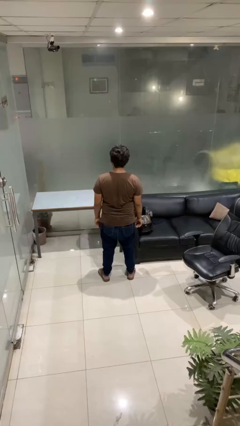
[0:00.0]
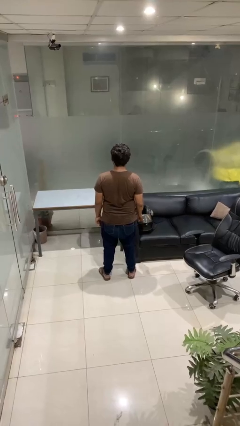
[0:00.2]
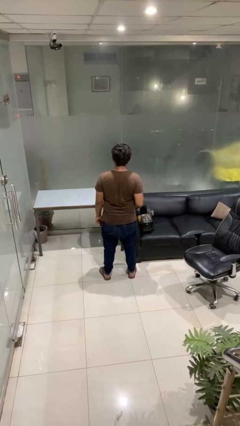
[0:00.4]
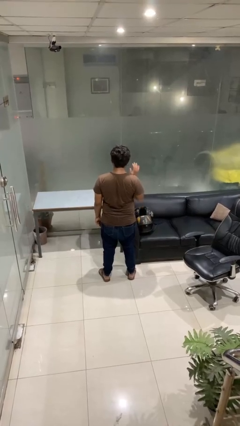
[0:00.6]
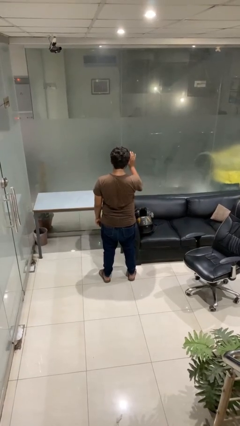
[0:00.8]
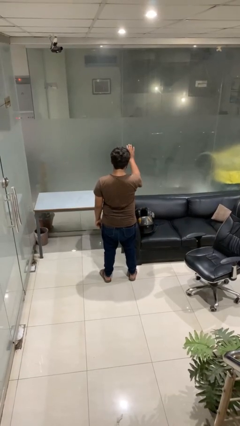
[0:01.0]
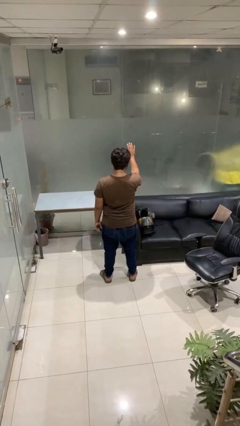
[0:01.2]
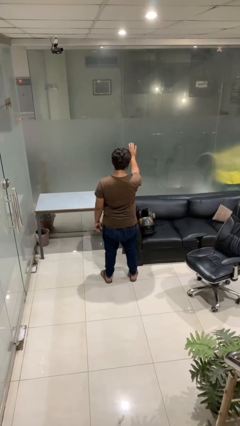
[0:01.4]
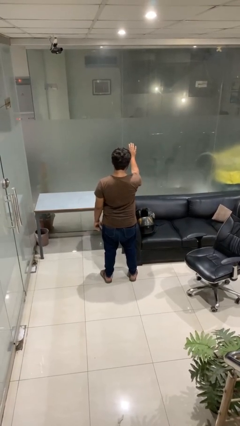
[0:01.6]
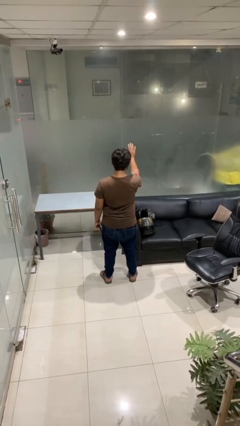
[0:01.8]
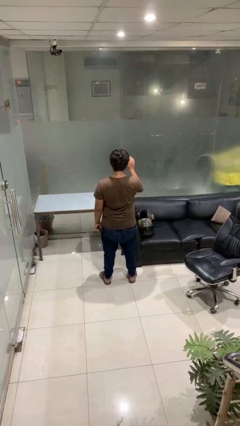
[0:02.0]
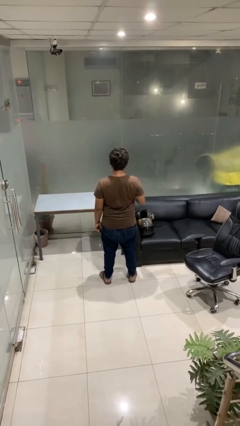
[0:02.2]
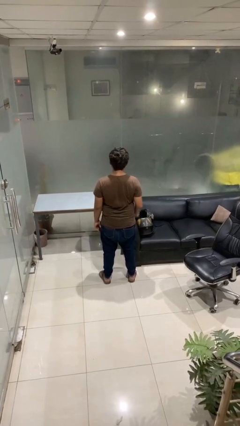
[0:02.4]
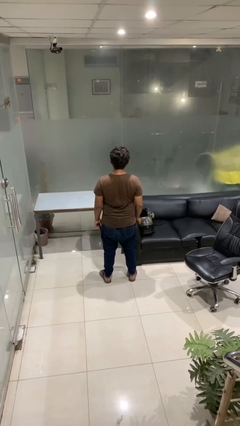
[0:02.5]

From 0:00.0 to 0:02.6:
person gestures stop

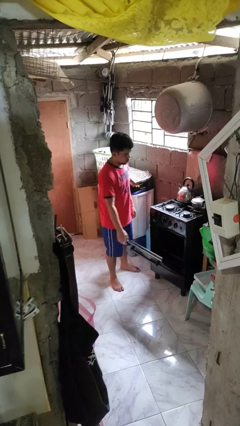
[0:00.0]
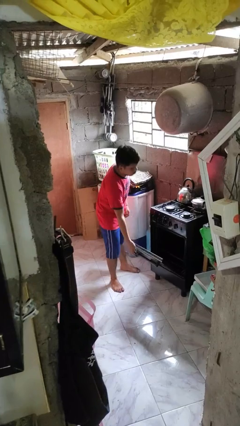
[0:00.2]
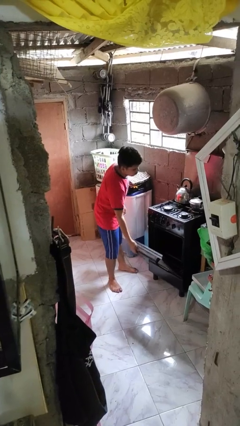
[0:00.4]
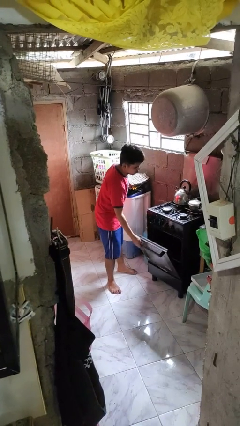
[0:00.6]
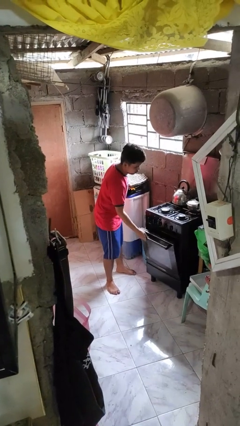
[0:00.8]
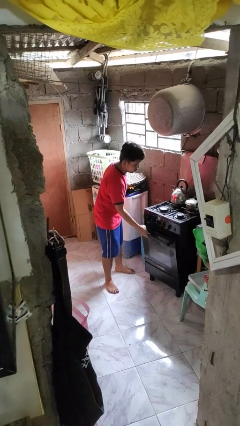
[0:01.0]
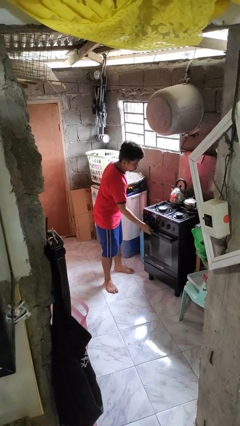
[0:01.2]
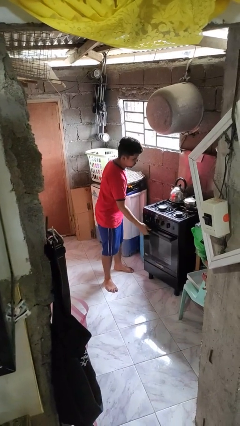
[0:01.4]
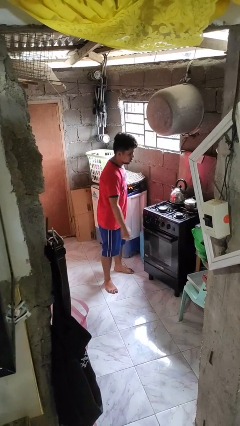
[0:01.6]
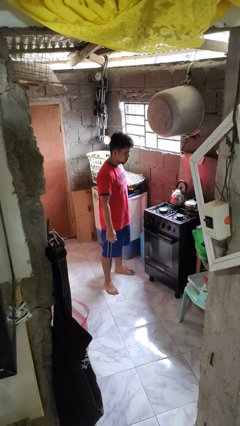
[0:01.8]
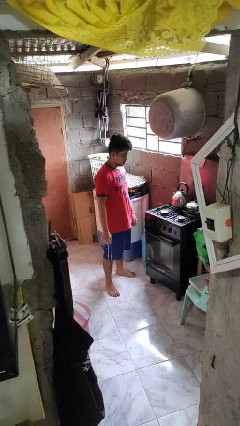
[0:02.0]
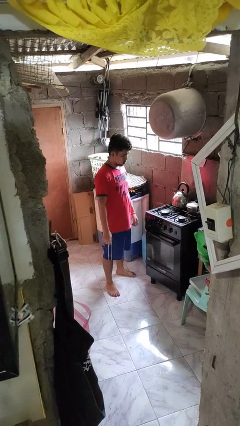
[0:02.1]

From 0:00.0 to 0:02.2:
person closes oven door

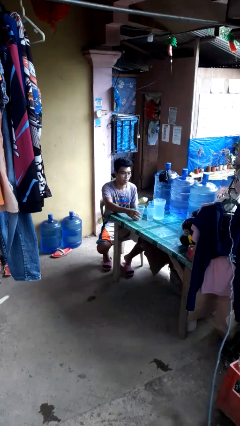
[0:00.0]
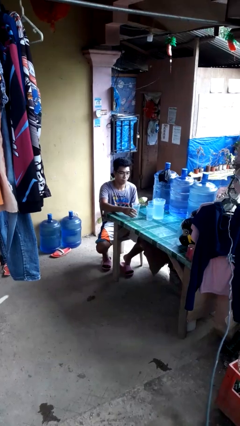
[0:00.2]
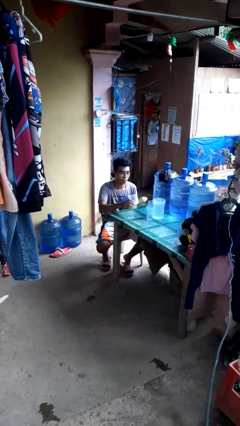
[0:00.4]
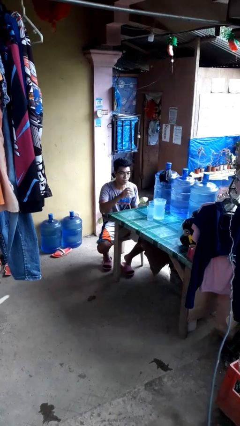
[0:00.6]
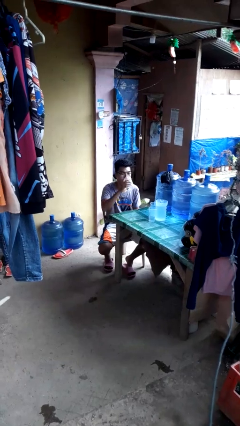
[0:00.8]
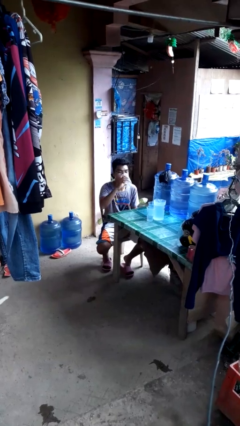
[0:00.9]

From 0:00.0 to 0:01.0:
person picks up object from table

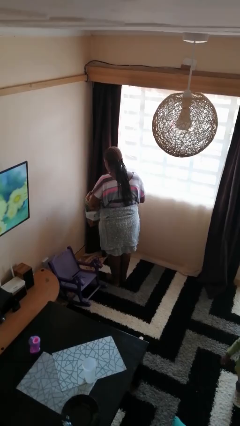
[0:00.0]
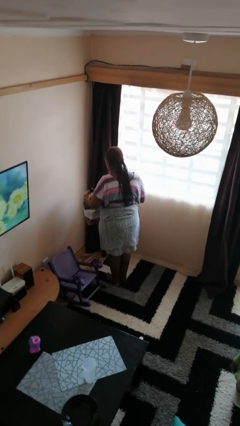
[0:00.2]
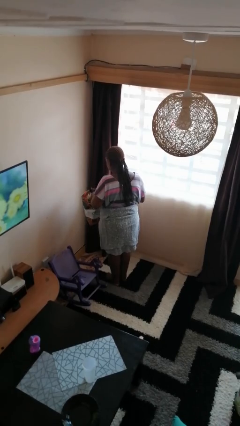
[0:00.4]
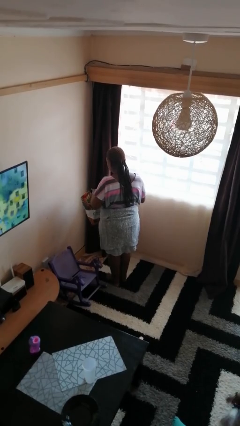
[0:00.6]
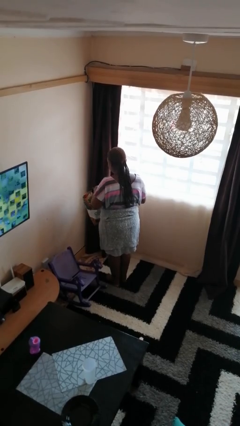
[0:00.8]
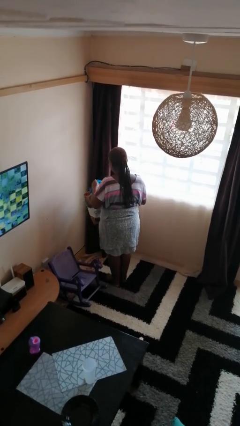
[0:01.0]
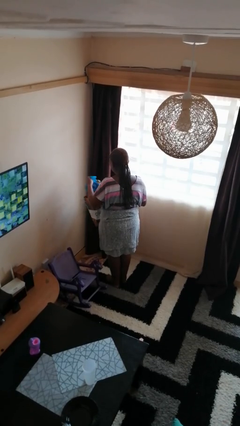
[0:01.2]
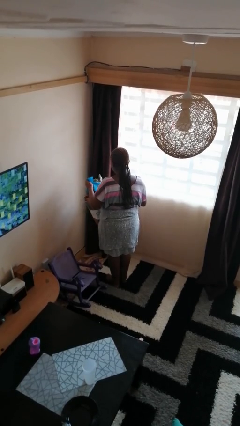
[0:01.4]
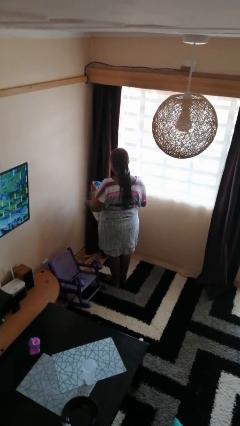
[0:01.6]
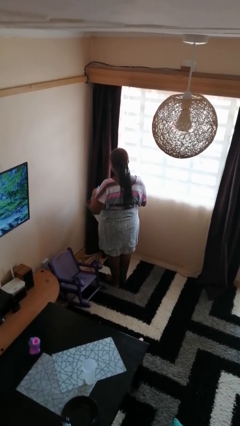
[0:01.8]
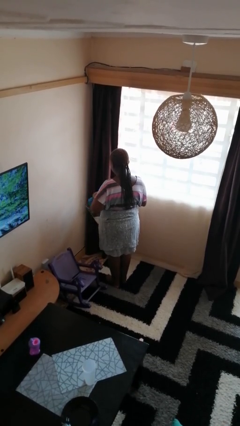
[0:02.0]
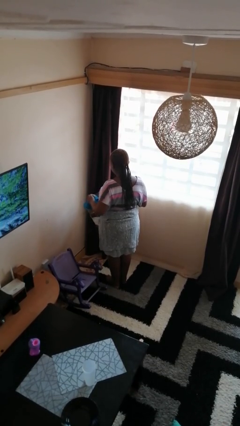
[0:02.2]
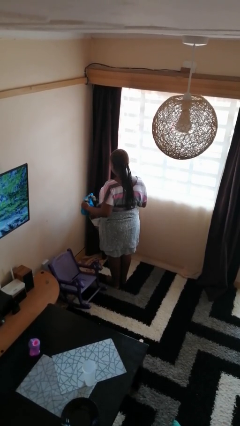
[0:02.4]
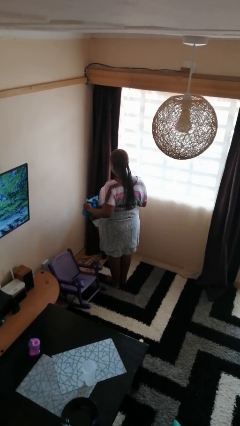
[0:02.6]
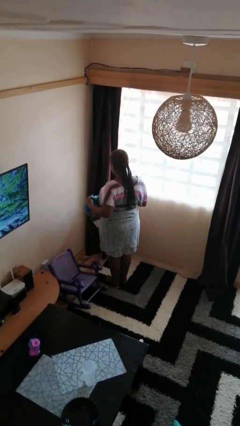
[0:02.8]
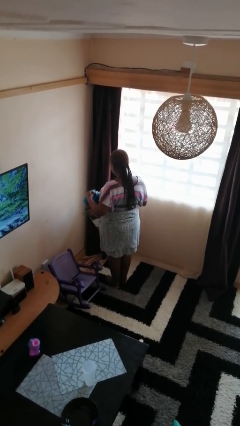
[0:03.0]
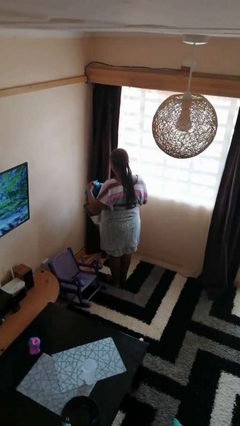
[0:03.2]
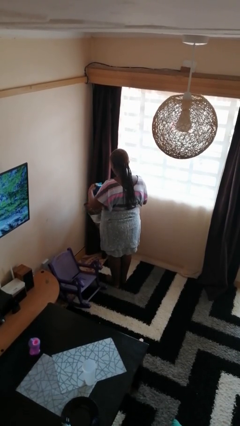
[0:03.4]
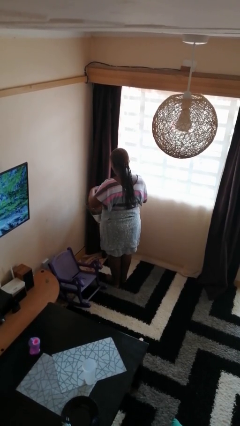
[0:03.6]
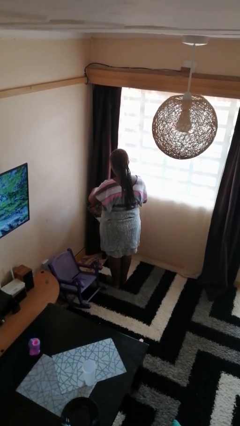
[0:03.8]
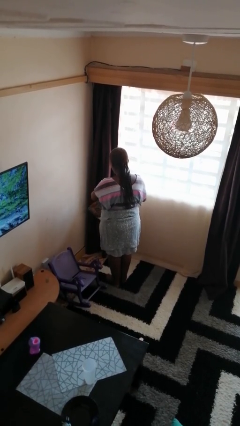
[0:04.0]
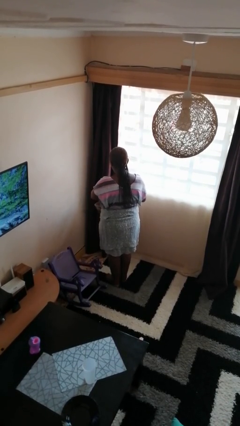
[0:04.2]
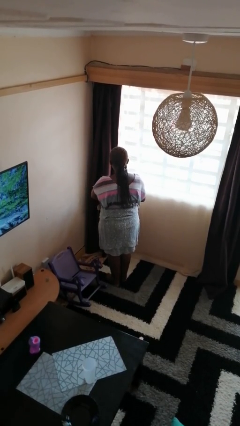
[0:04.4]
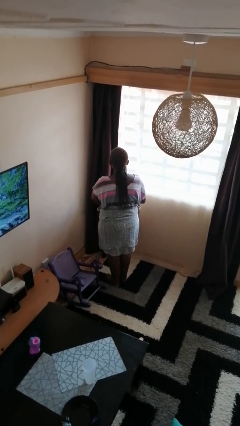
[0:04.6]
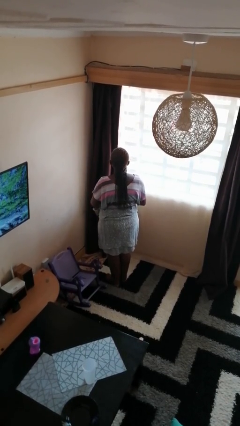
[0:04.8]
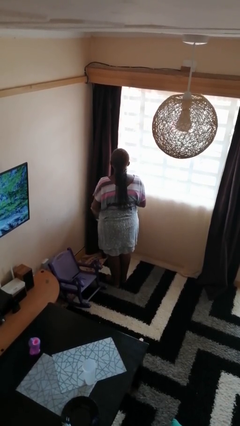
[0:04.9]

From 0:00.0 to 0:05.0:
person puts object into bag

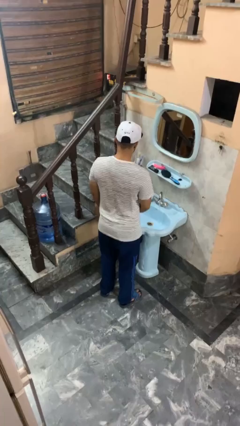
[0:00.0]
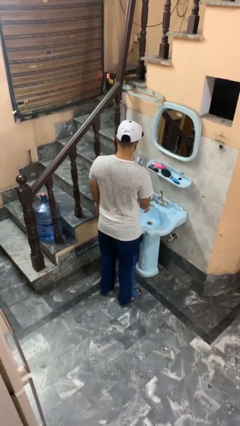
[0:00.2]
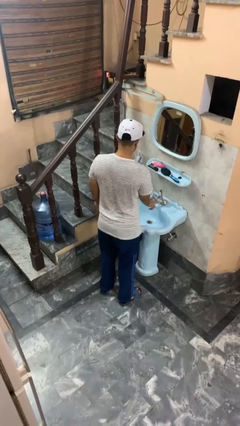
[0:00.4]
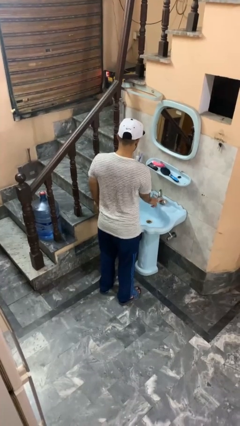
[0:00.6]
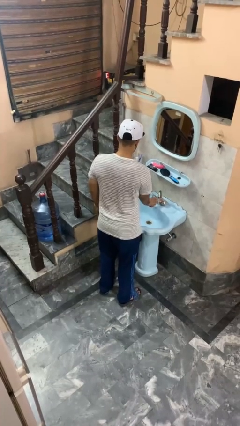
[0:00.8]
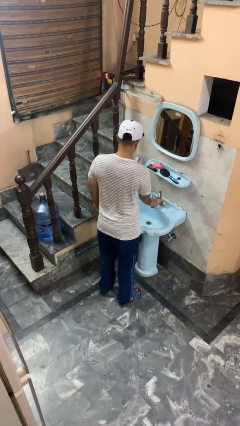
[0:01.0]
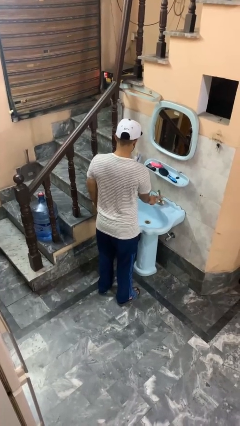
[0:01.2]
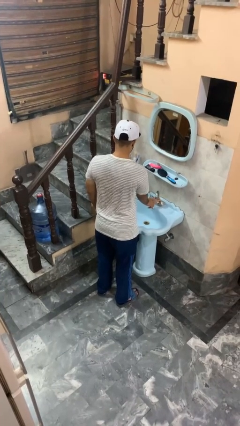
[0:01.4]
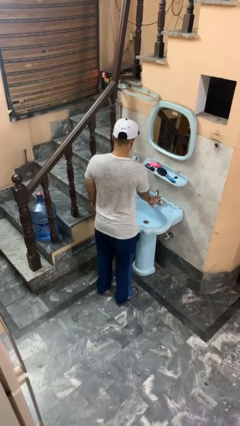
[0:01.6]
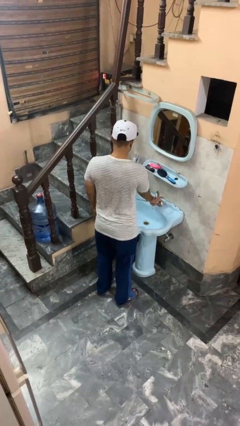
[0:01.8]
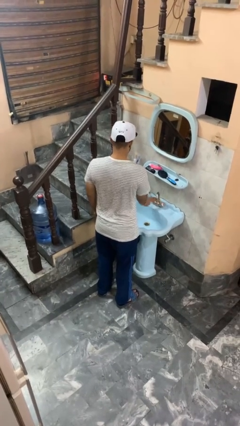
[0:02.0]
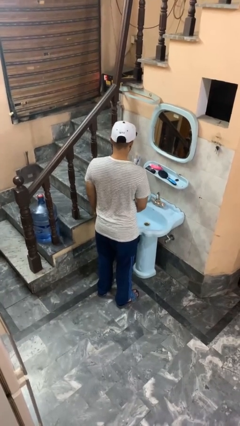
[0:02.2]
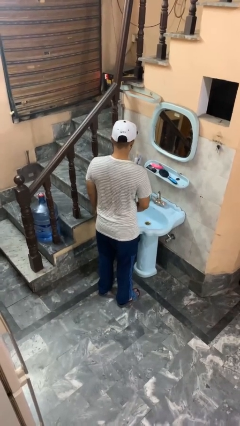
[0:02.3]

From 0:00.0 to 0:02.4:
person turns off faucet

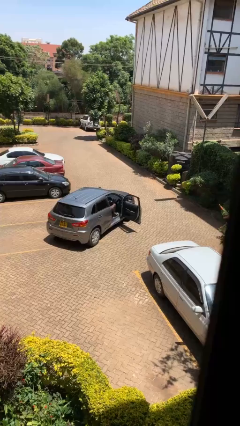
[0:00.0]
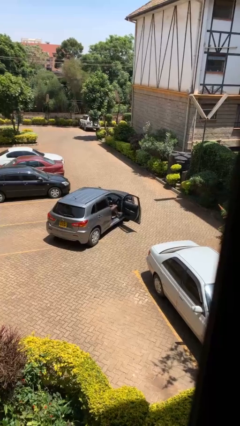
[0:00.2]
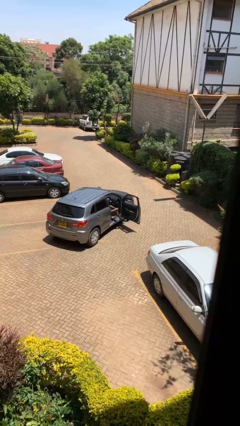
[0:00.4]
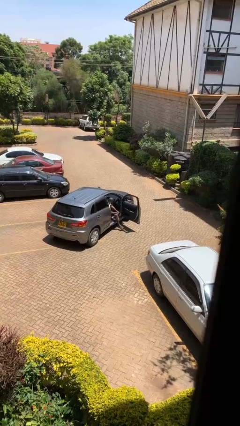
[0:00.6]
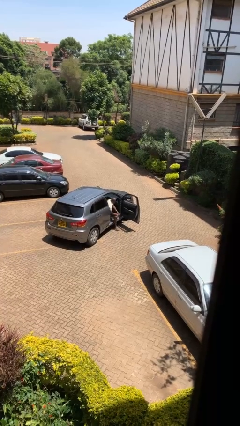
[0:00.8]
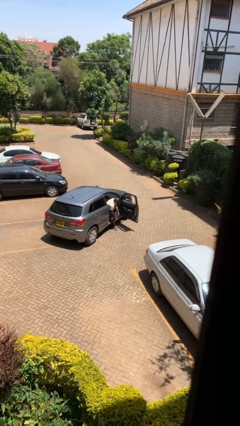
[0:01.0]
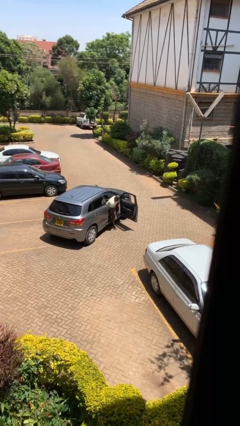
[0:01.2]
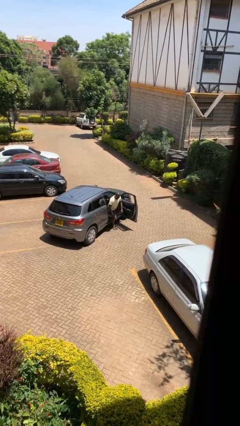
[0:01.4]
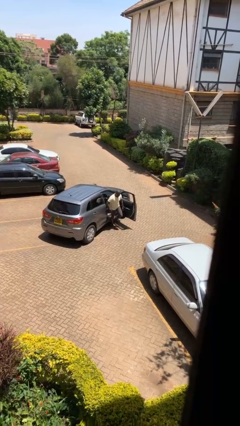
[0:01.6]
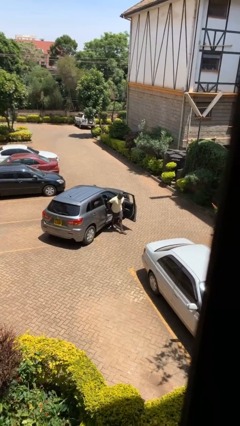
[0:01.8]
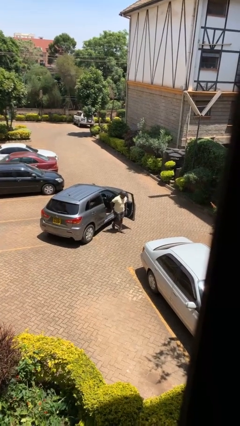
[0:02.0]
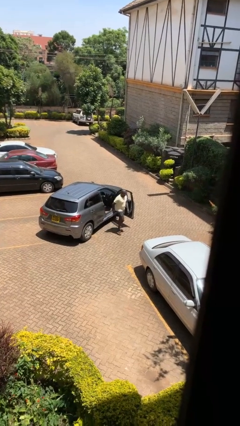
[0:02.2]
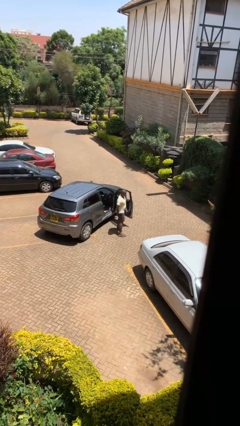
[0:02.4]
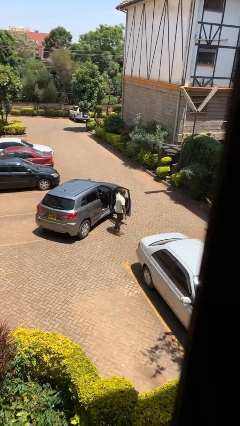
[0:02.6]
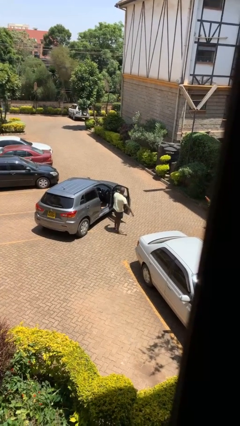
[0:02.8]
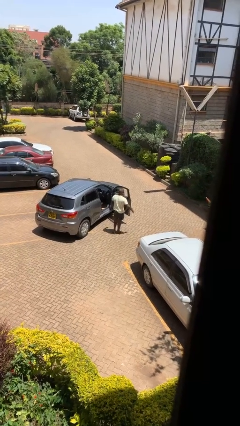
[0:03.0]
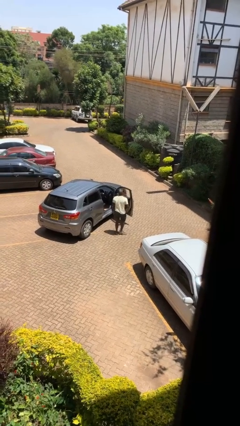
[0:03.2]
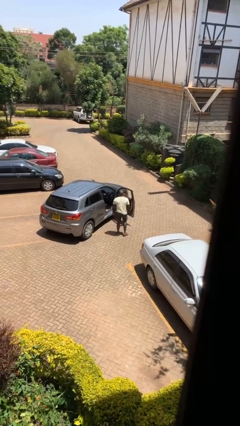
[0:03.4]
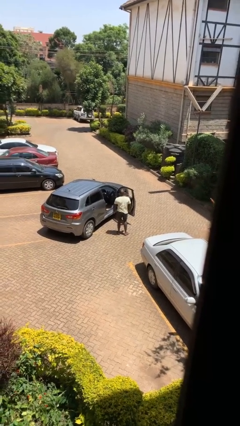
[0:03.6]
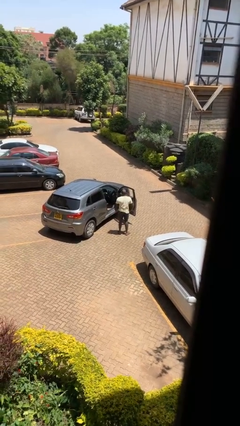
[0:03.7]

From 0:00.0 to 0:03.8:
person exits car

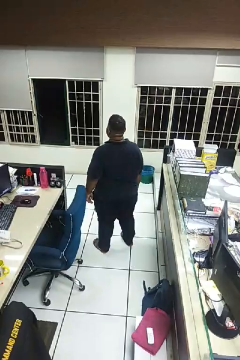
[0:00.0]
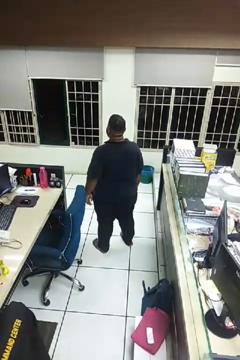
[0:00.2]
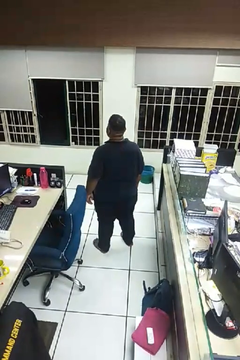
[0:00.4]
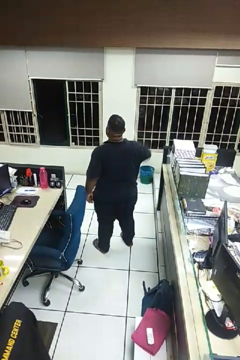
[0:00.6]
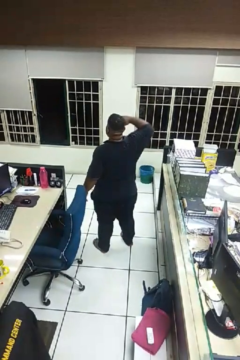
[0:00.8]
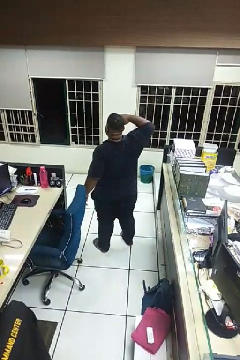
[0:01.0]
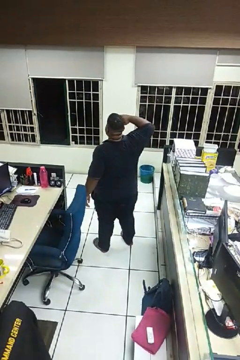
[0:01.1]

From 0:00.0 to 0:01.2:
person salutes
